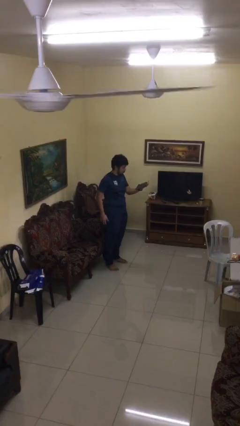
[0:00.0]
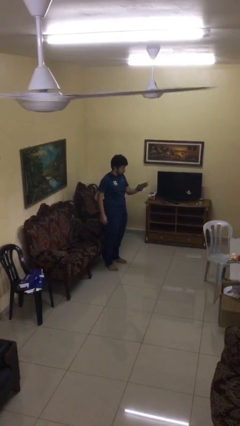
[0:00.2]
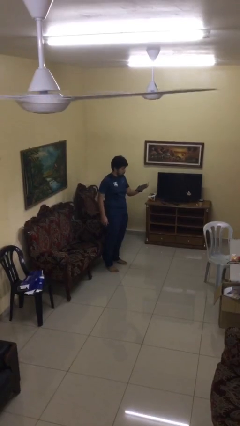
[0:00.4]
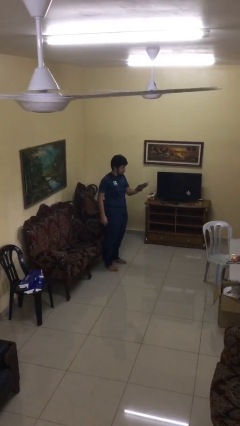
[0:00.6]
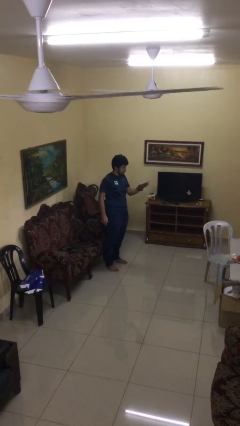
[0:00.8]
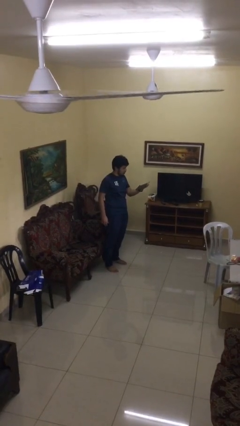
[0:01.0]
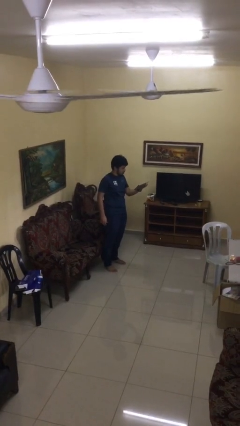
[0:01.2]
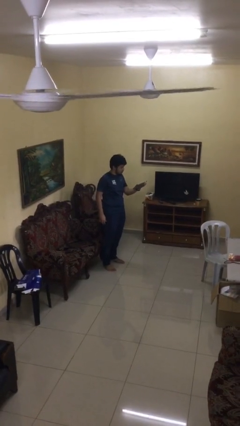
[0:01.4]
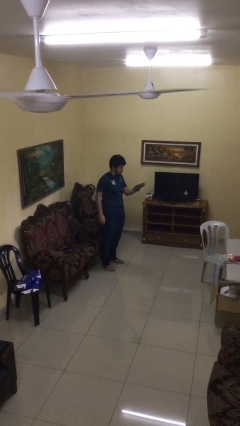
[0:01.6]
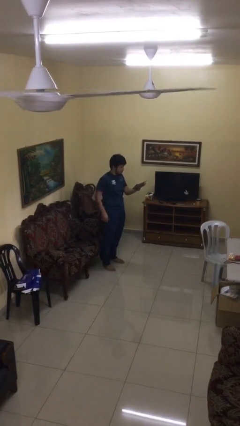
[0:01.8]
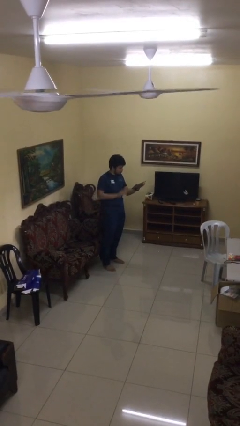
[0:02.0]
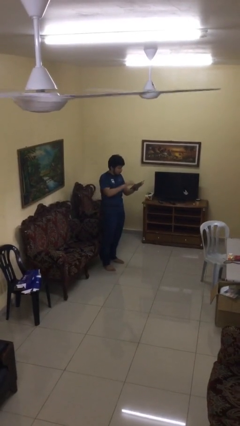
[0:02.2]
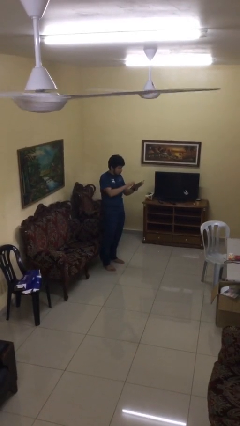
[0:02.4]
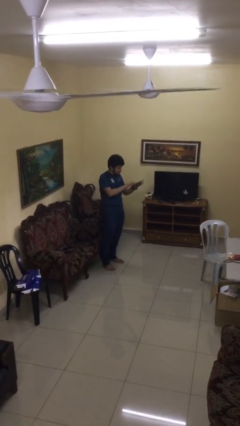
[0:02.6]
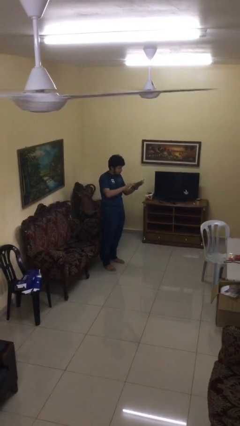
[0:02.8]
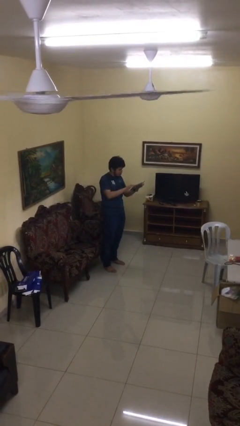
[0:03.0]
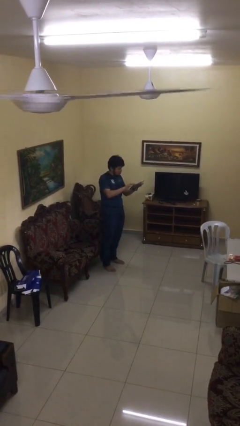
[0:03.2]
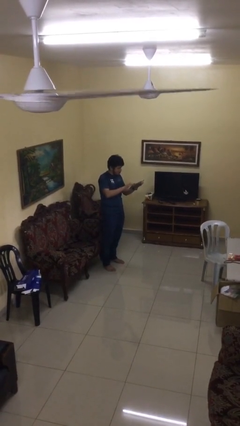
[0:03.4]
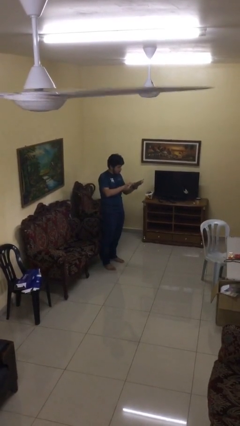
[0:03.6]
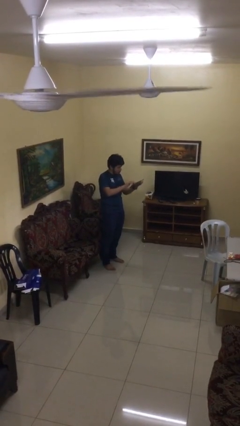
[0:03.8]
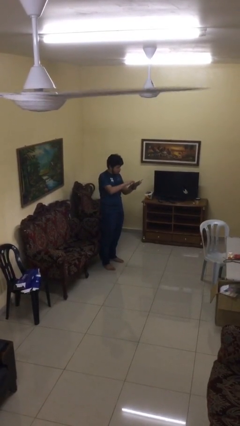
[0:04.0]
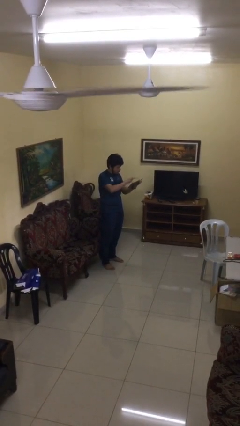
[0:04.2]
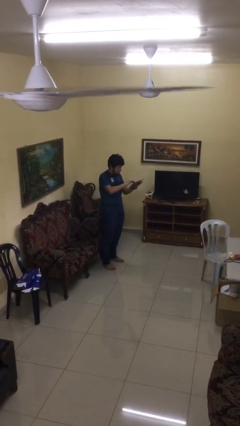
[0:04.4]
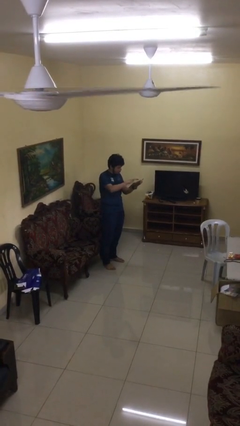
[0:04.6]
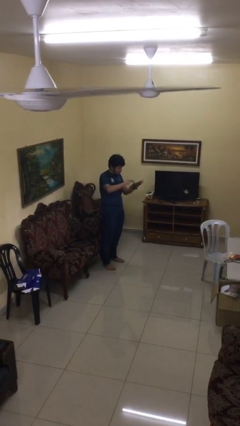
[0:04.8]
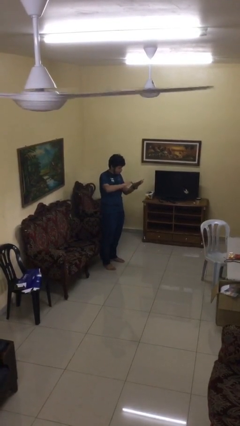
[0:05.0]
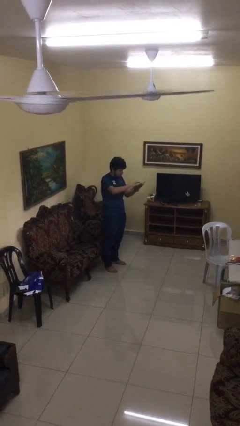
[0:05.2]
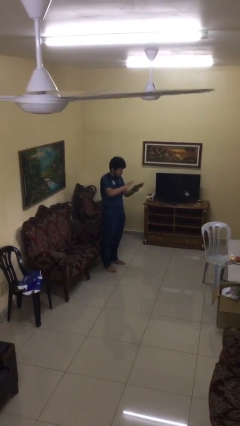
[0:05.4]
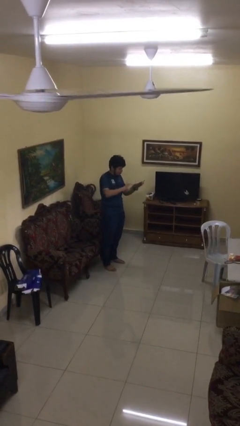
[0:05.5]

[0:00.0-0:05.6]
person interacts with tablet

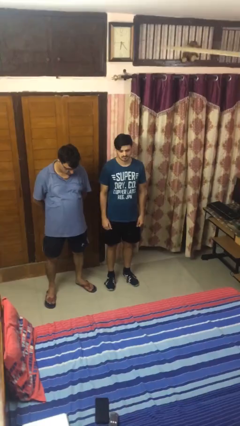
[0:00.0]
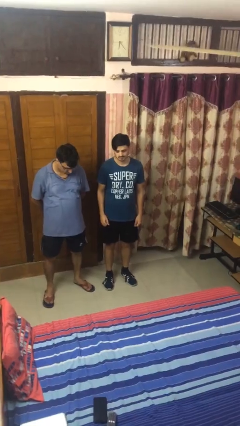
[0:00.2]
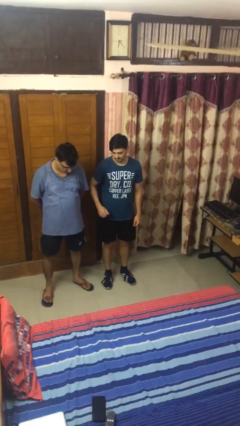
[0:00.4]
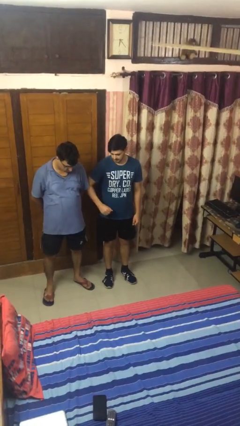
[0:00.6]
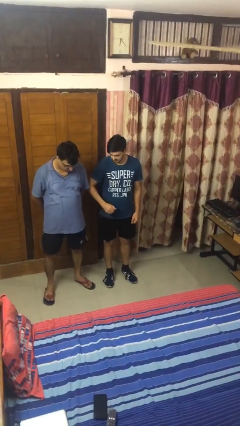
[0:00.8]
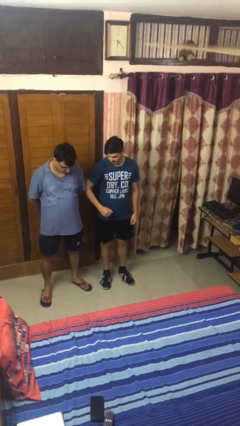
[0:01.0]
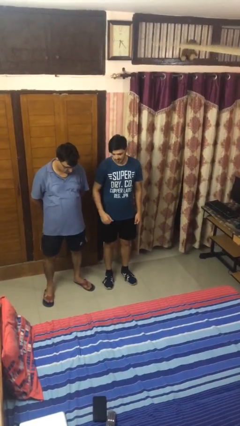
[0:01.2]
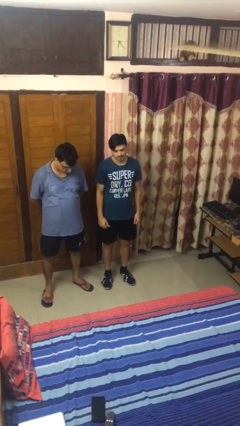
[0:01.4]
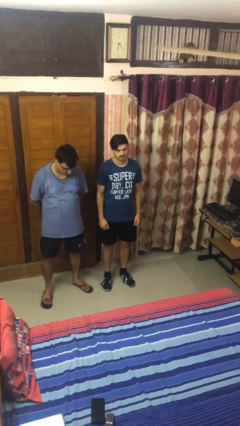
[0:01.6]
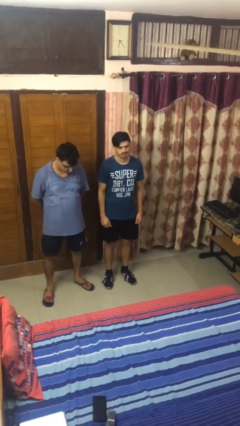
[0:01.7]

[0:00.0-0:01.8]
person nudges person with elbow

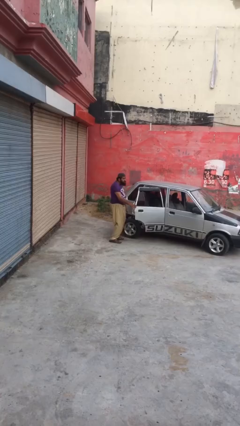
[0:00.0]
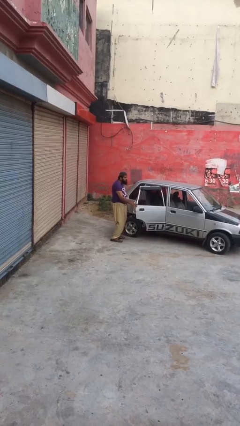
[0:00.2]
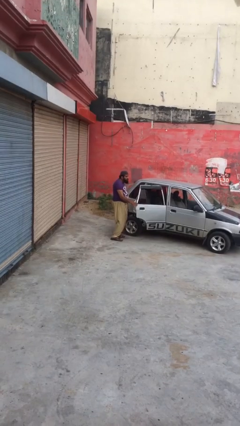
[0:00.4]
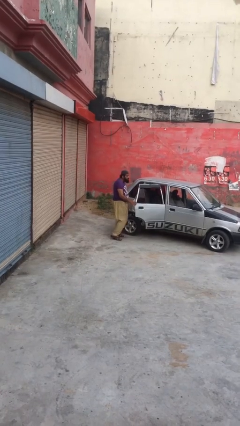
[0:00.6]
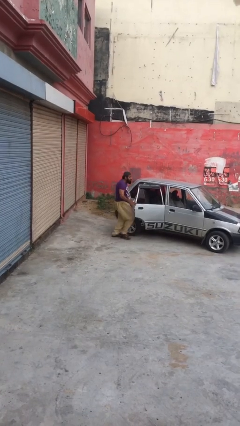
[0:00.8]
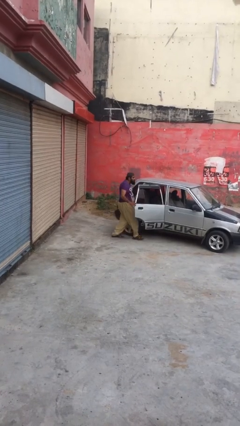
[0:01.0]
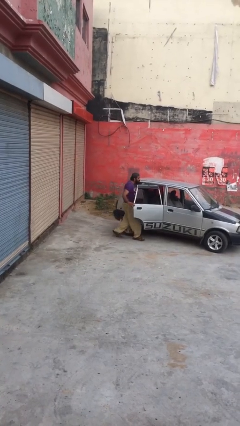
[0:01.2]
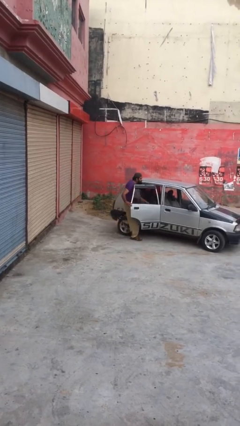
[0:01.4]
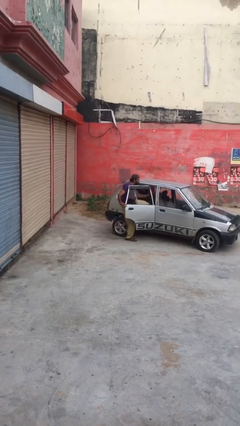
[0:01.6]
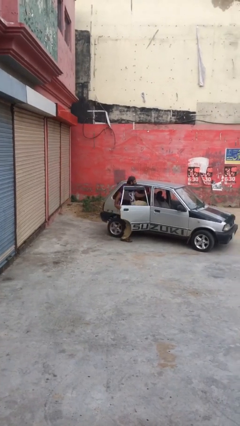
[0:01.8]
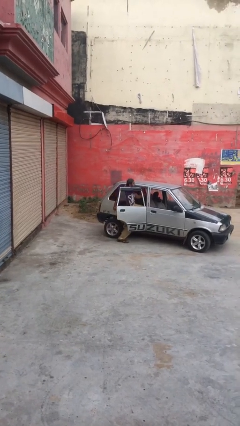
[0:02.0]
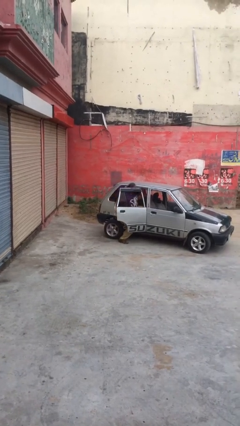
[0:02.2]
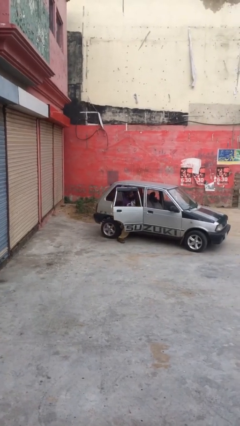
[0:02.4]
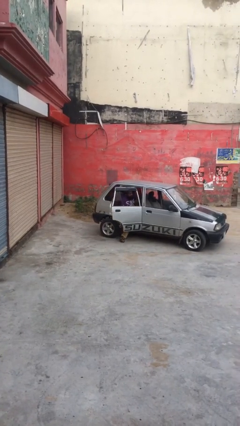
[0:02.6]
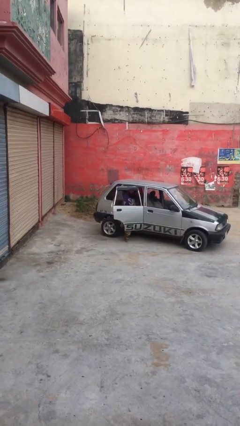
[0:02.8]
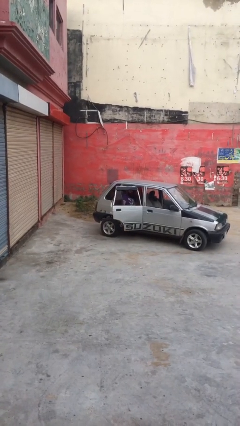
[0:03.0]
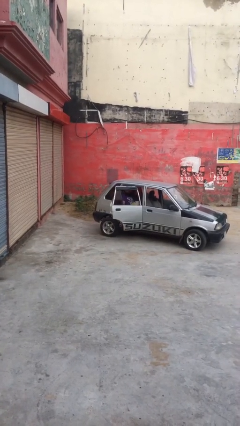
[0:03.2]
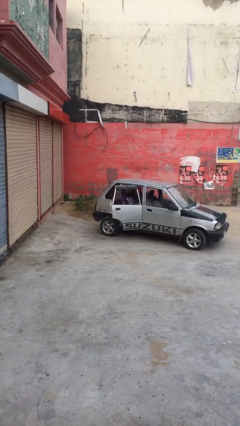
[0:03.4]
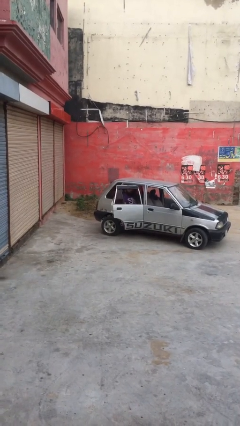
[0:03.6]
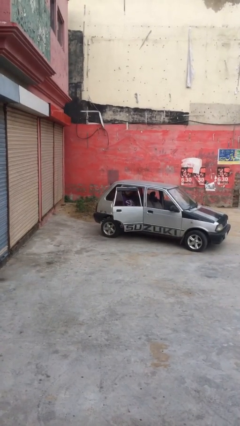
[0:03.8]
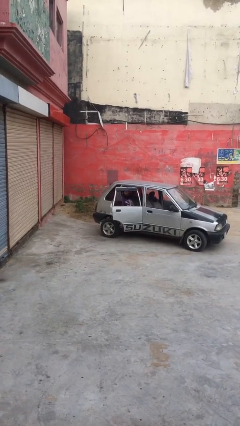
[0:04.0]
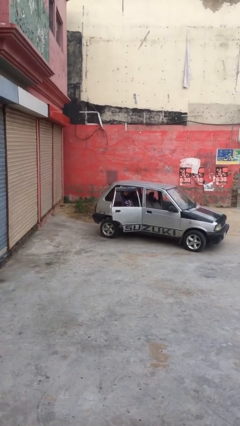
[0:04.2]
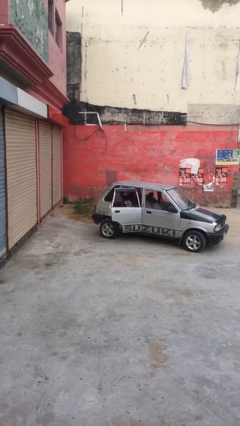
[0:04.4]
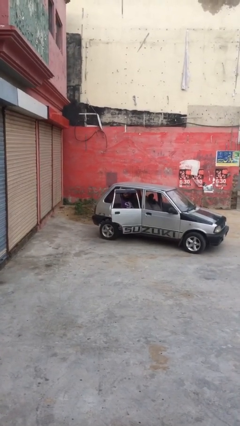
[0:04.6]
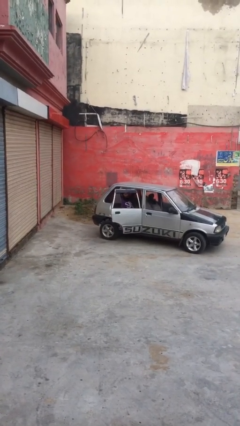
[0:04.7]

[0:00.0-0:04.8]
person enters car

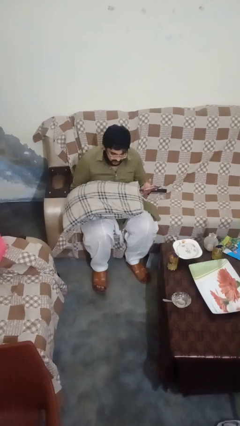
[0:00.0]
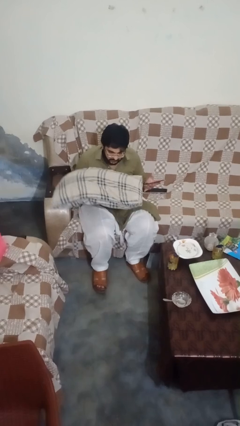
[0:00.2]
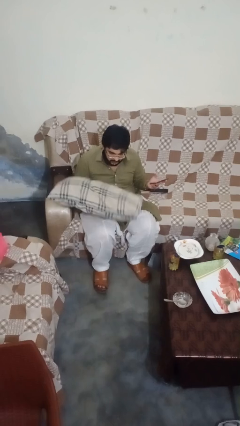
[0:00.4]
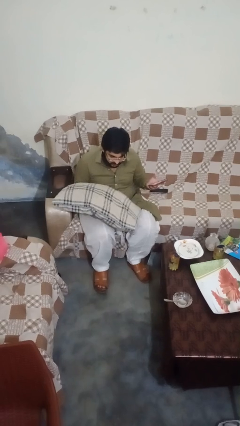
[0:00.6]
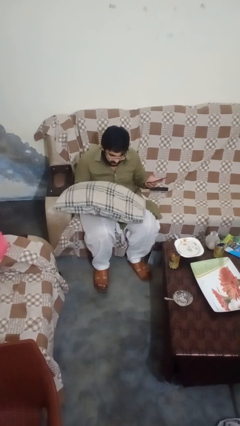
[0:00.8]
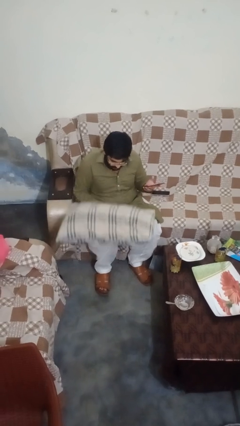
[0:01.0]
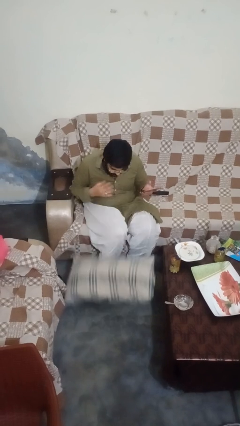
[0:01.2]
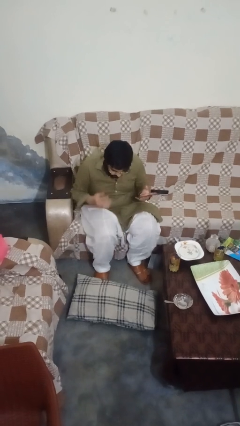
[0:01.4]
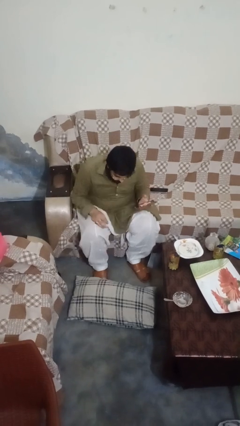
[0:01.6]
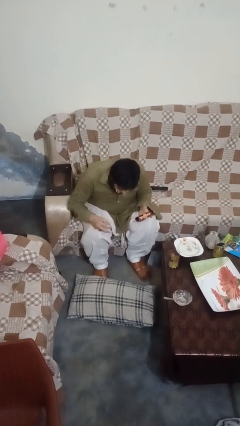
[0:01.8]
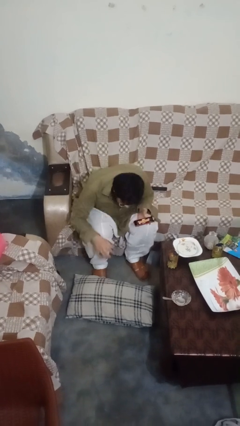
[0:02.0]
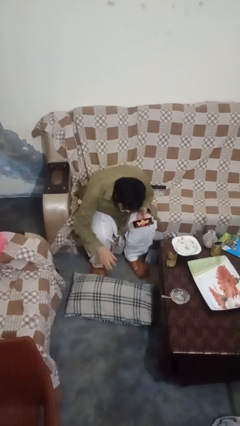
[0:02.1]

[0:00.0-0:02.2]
person drops object

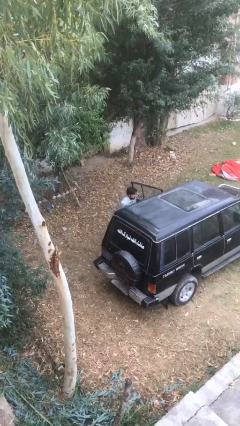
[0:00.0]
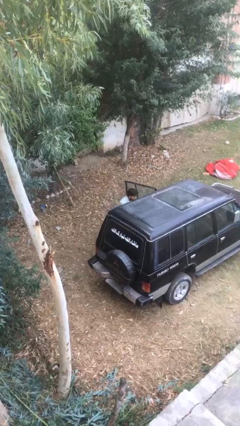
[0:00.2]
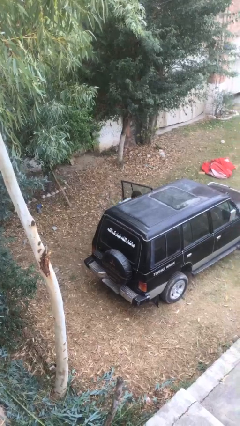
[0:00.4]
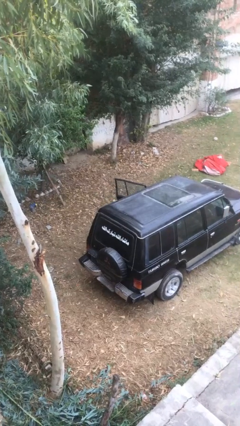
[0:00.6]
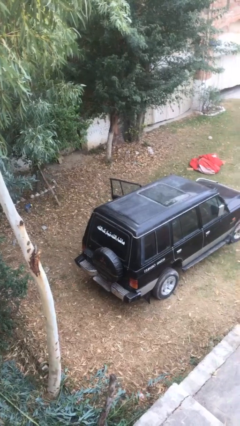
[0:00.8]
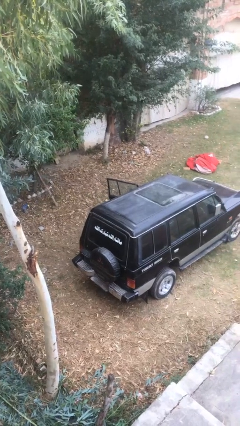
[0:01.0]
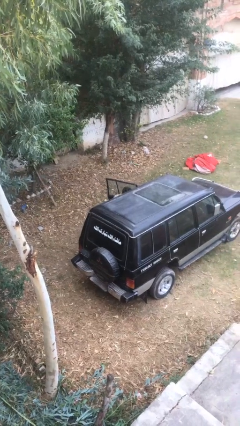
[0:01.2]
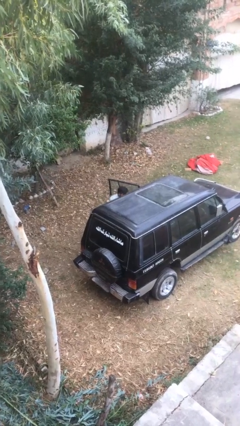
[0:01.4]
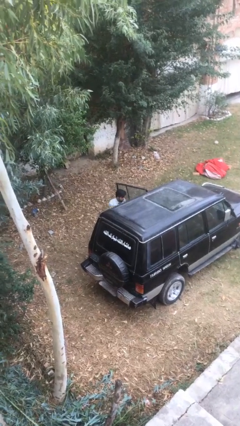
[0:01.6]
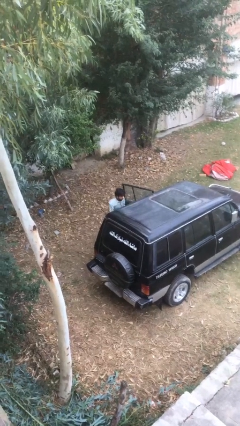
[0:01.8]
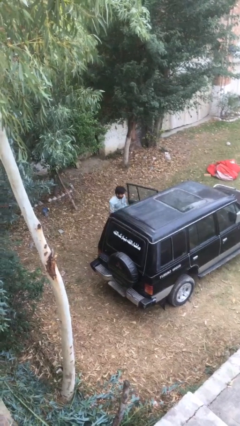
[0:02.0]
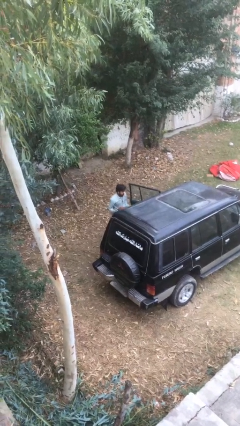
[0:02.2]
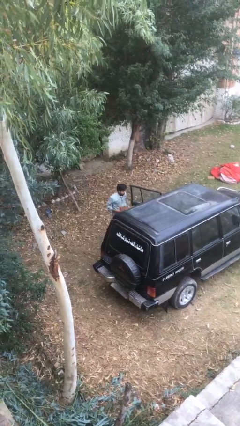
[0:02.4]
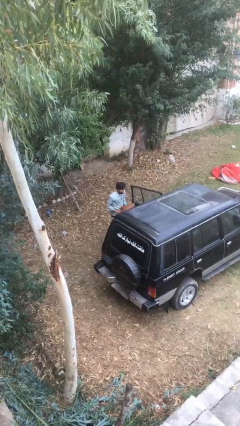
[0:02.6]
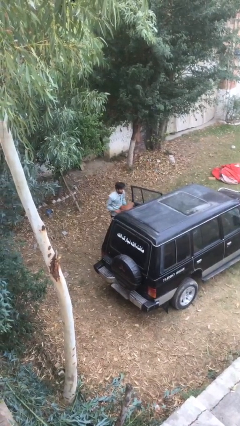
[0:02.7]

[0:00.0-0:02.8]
person unloads car

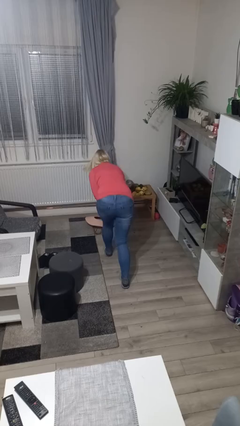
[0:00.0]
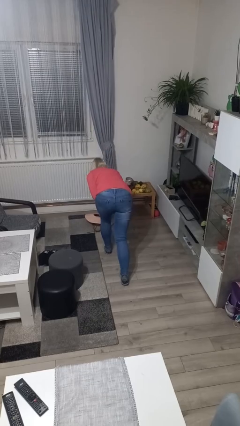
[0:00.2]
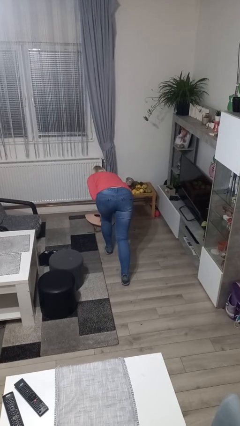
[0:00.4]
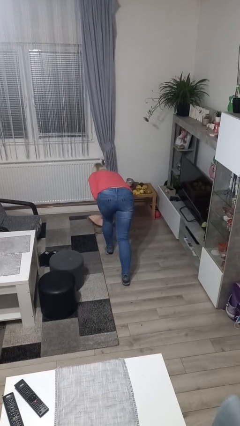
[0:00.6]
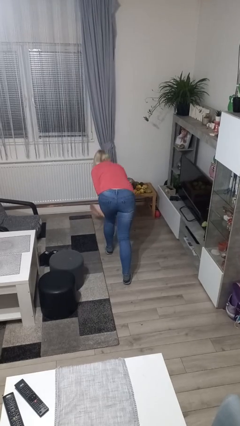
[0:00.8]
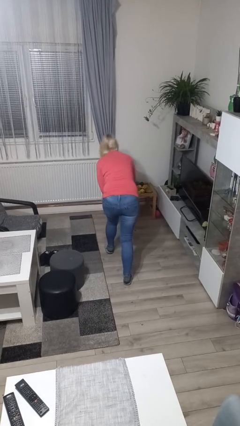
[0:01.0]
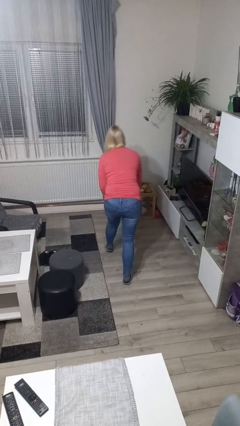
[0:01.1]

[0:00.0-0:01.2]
person picks up object from floor
